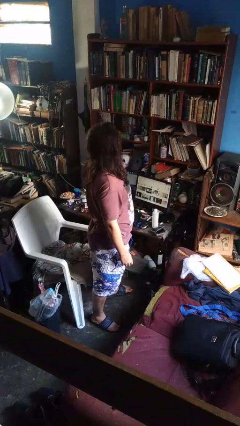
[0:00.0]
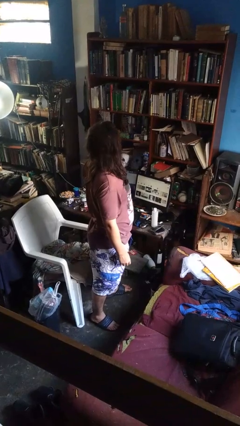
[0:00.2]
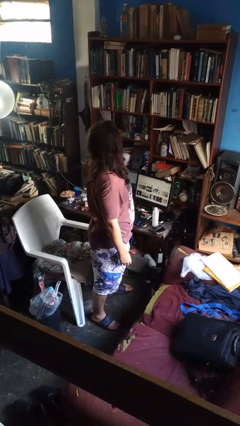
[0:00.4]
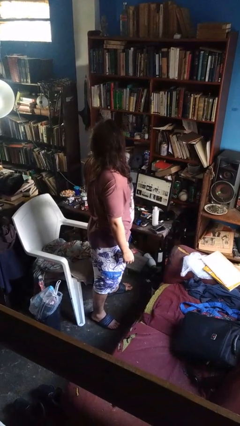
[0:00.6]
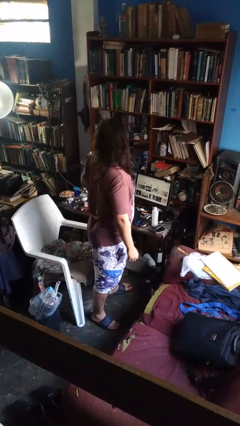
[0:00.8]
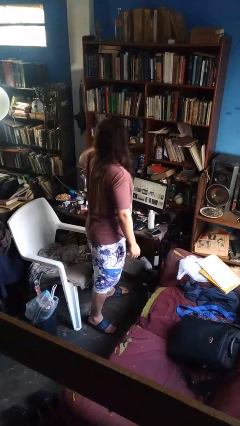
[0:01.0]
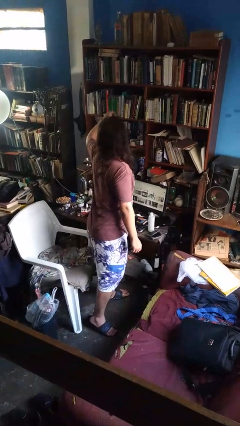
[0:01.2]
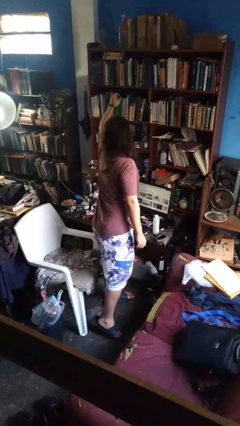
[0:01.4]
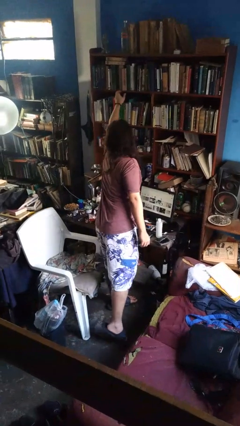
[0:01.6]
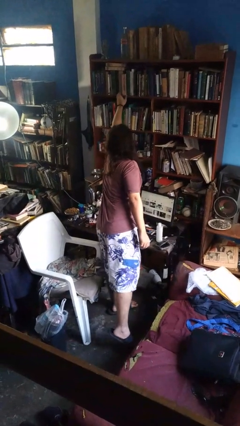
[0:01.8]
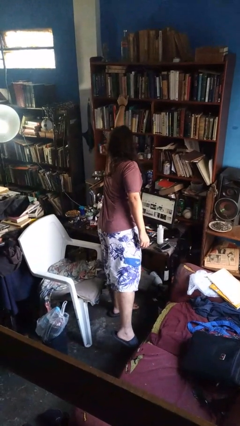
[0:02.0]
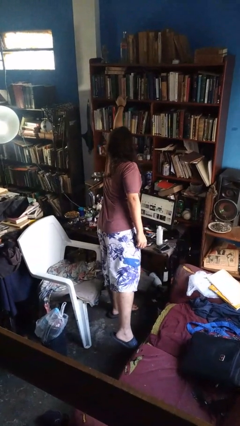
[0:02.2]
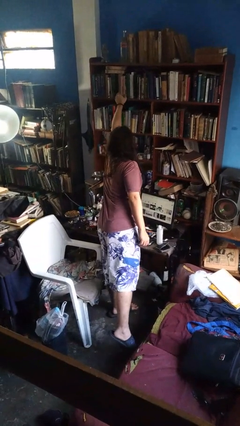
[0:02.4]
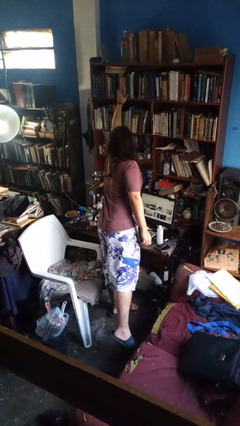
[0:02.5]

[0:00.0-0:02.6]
person picks up object from shelf

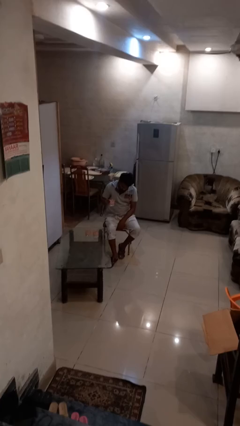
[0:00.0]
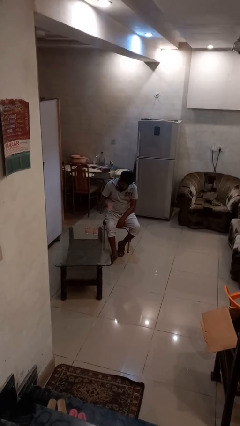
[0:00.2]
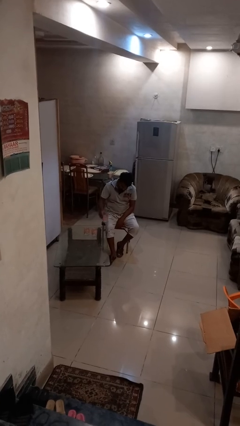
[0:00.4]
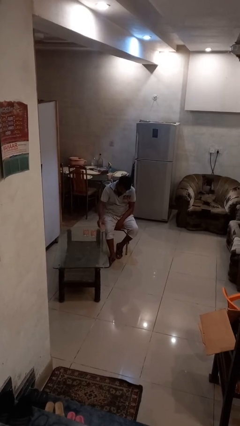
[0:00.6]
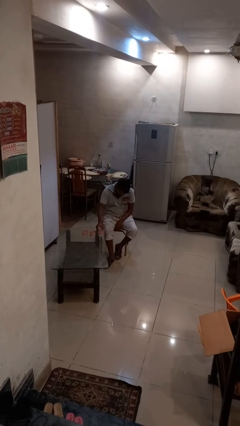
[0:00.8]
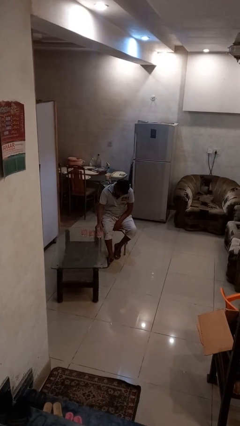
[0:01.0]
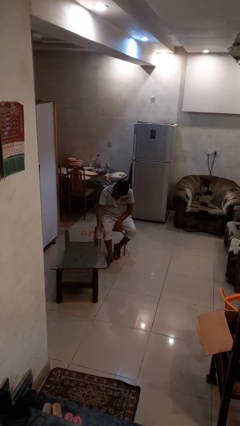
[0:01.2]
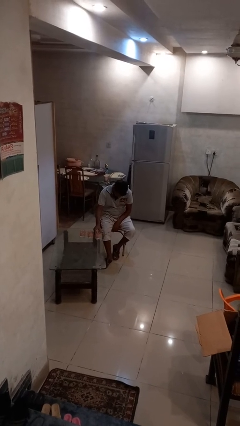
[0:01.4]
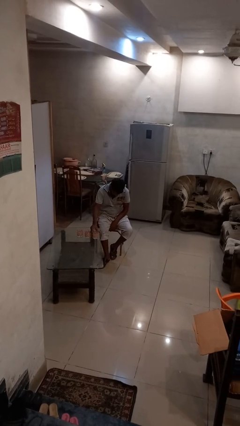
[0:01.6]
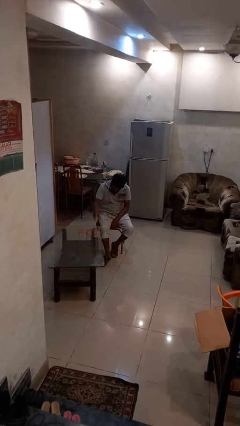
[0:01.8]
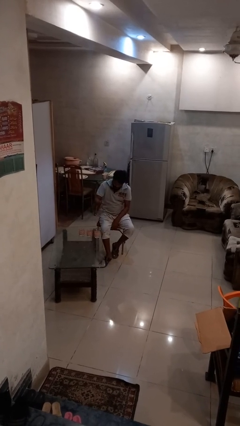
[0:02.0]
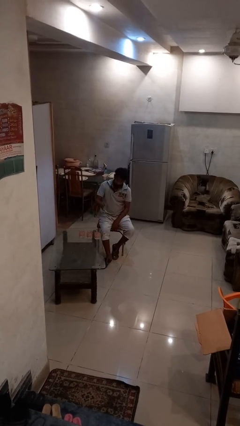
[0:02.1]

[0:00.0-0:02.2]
person puts down object on table

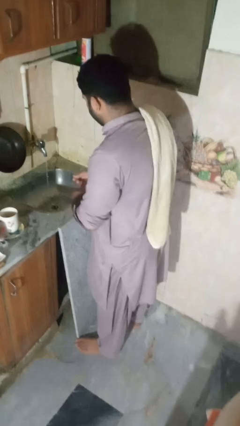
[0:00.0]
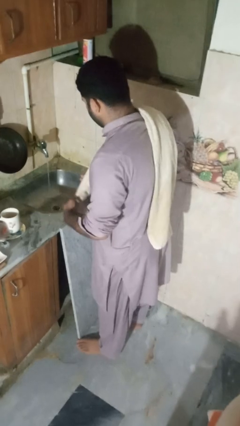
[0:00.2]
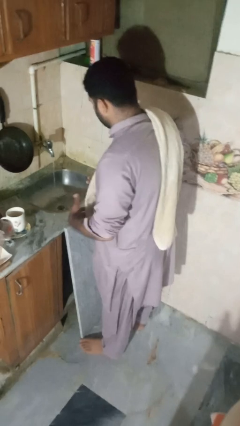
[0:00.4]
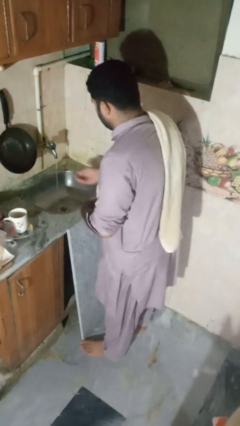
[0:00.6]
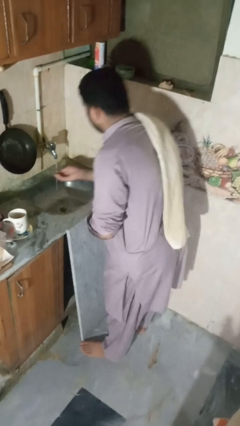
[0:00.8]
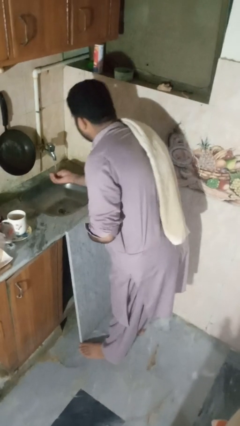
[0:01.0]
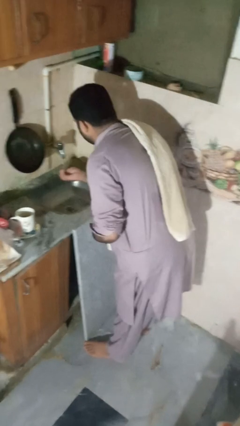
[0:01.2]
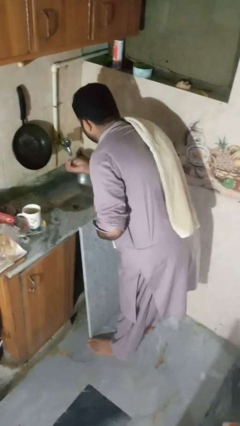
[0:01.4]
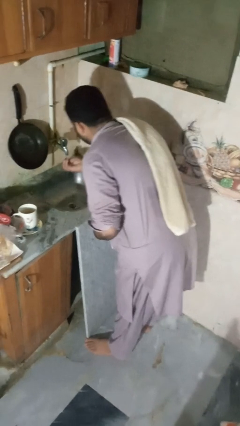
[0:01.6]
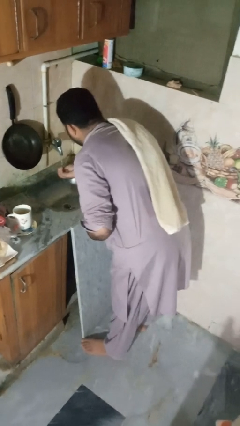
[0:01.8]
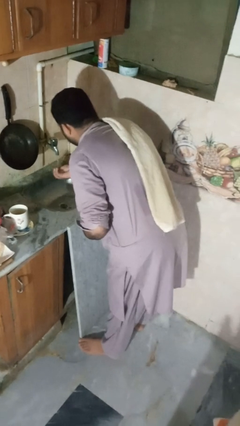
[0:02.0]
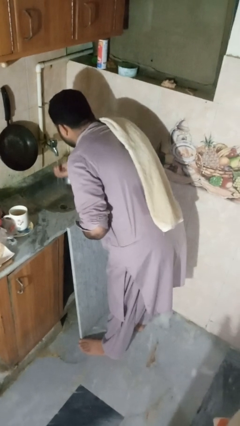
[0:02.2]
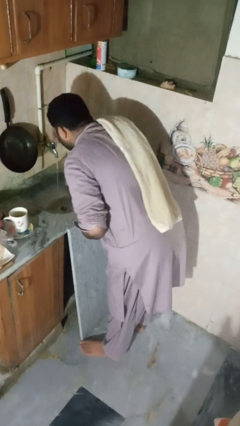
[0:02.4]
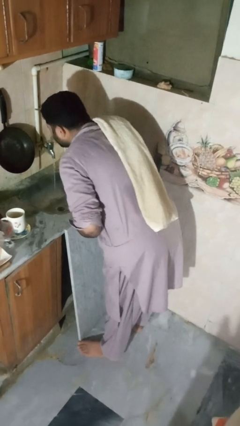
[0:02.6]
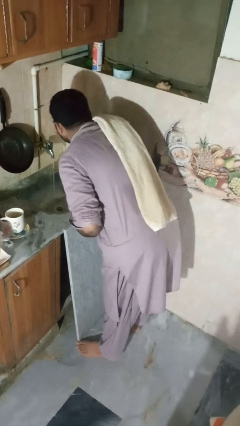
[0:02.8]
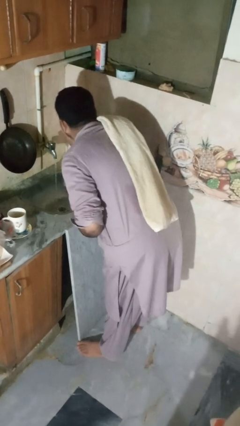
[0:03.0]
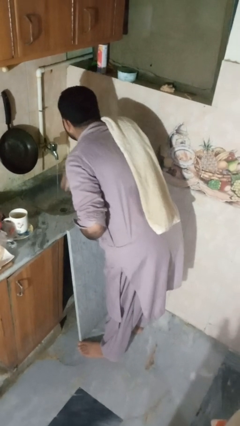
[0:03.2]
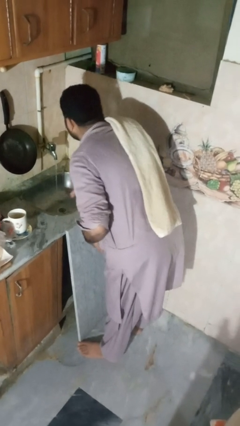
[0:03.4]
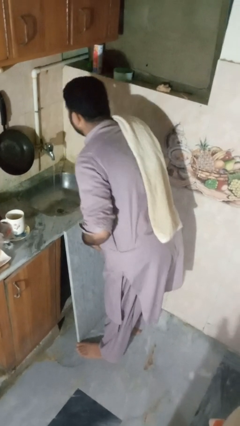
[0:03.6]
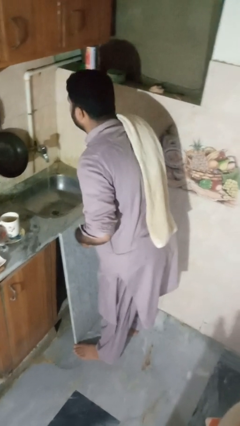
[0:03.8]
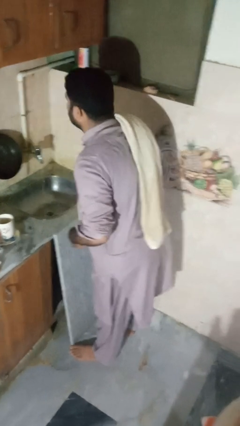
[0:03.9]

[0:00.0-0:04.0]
person washes face

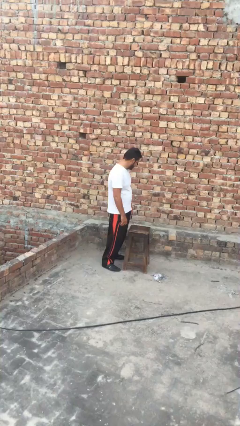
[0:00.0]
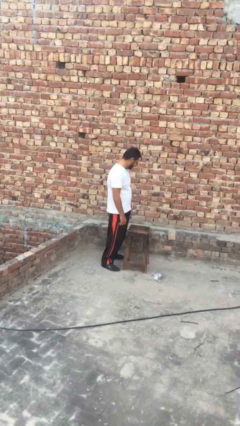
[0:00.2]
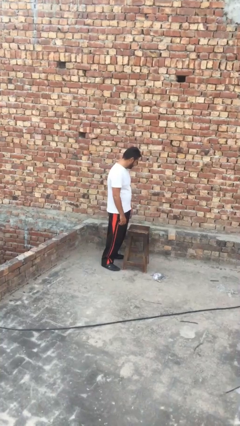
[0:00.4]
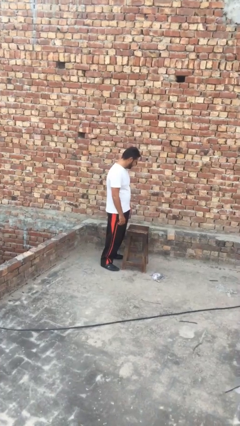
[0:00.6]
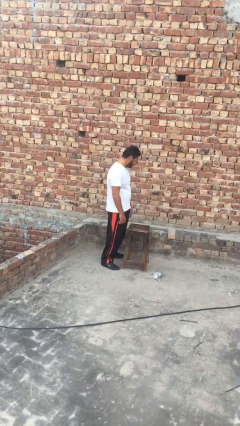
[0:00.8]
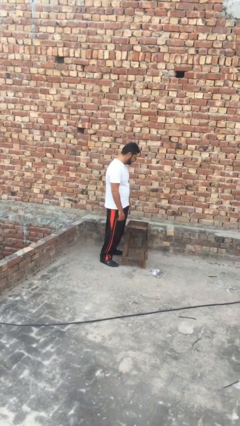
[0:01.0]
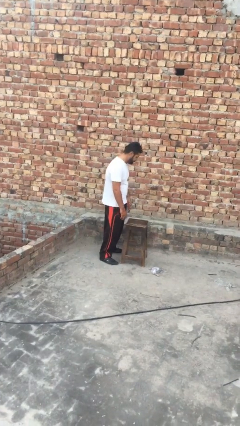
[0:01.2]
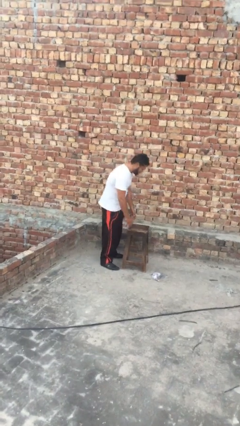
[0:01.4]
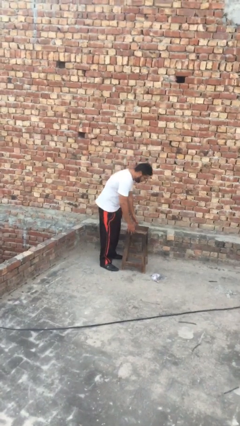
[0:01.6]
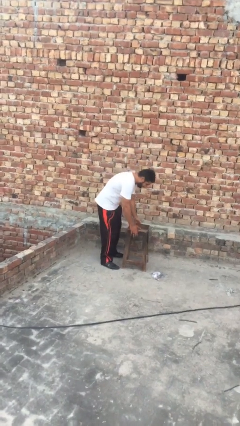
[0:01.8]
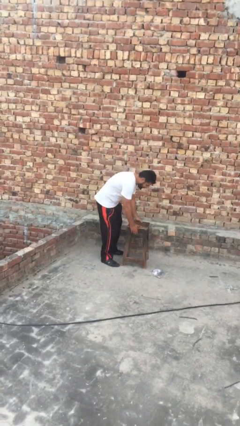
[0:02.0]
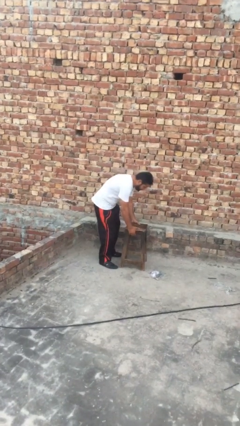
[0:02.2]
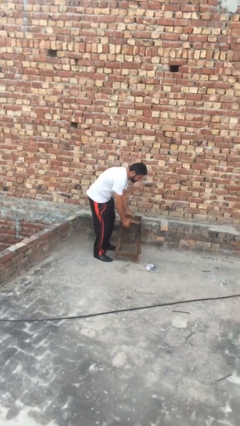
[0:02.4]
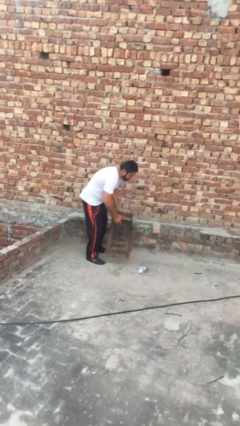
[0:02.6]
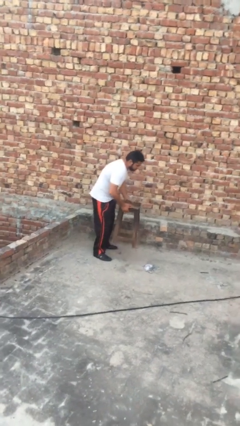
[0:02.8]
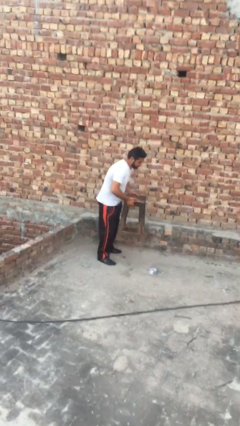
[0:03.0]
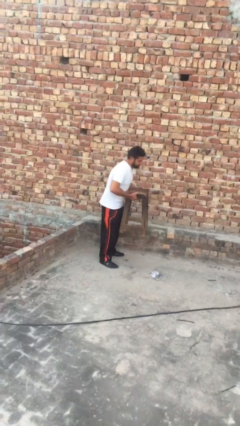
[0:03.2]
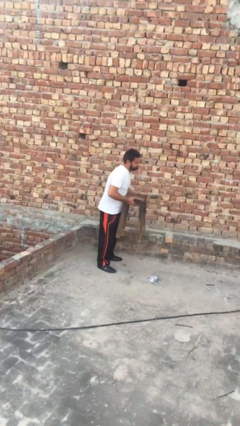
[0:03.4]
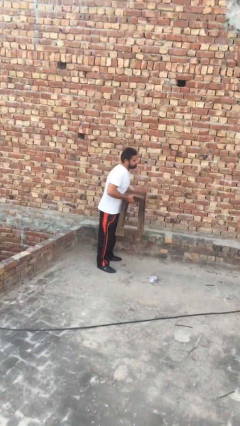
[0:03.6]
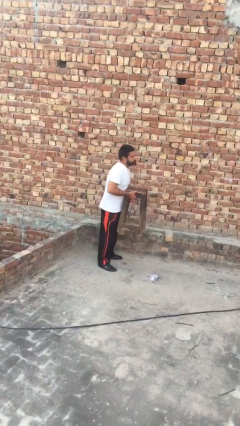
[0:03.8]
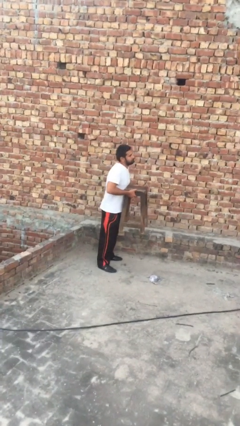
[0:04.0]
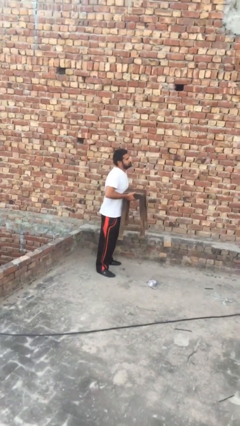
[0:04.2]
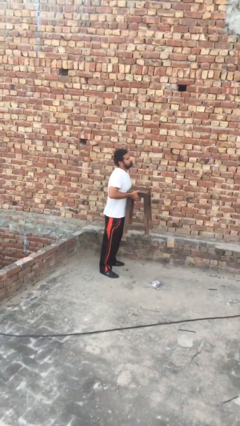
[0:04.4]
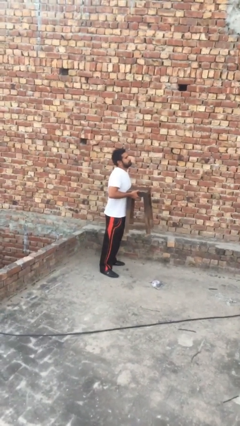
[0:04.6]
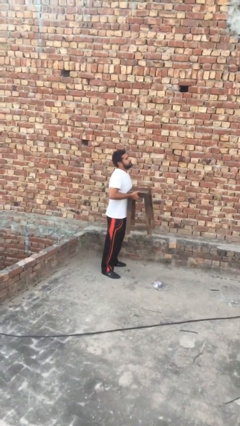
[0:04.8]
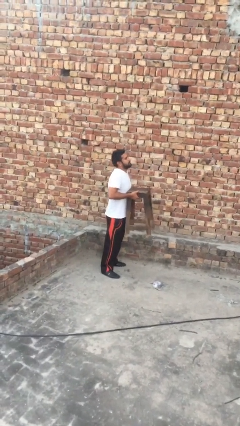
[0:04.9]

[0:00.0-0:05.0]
person picks up object from floor

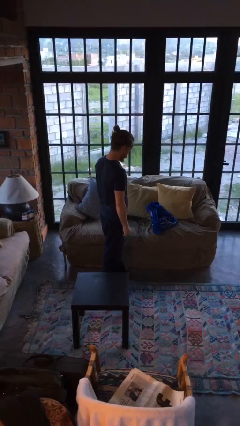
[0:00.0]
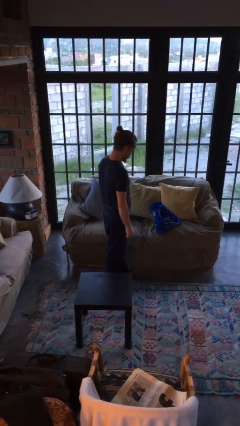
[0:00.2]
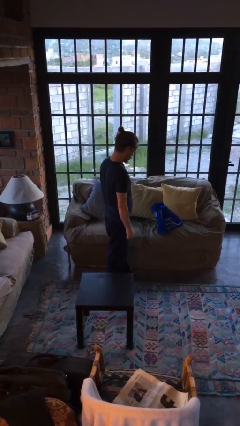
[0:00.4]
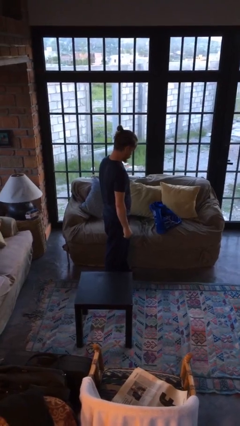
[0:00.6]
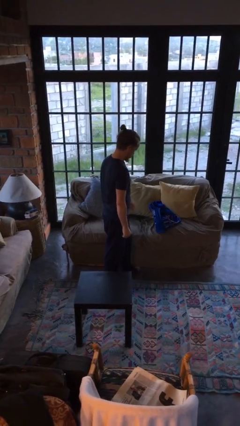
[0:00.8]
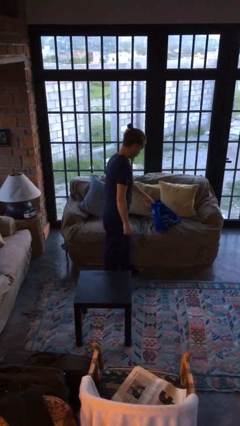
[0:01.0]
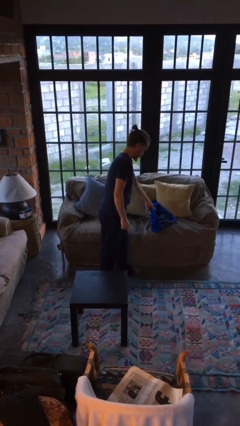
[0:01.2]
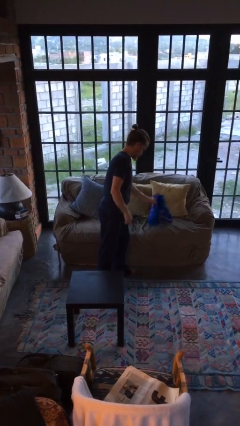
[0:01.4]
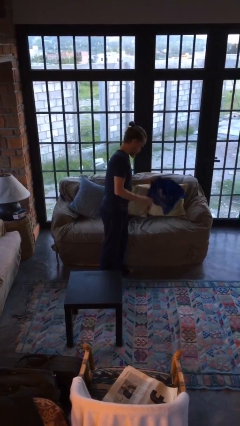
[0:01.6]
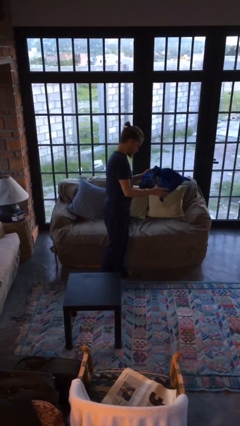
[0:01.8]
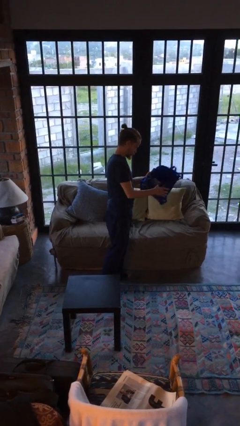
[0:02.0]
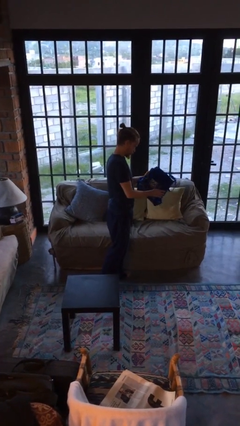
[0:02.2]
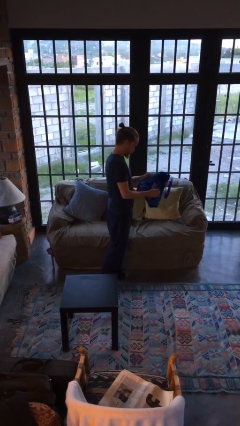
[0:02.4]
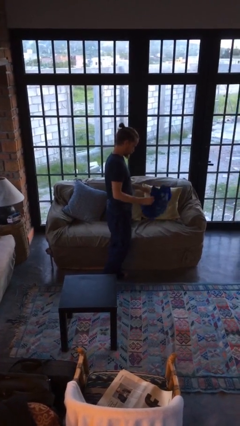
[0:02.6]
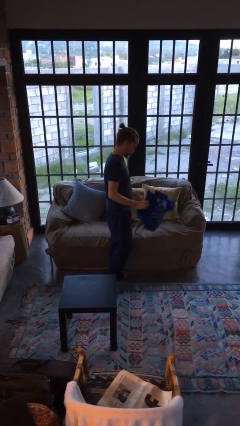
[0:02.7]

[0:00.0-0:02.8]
person picks up object from couch

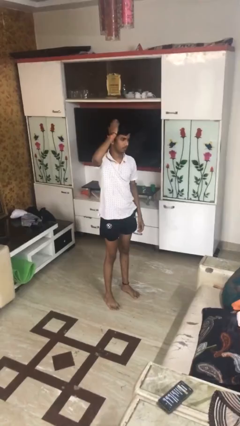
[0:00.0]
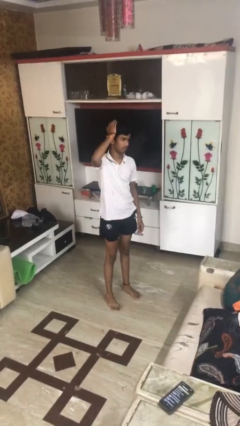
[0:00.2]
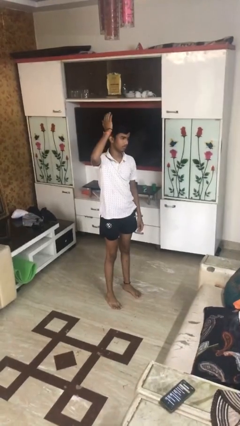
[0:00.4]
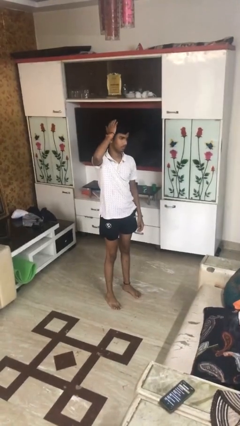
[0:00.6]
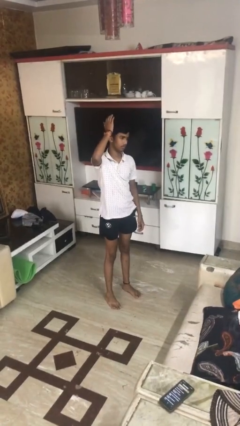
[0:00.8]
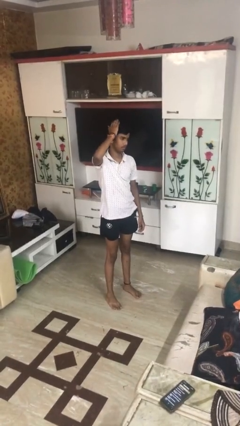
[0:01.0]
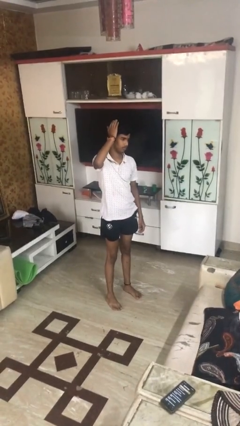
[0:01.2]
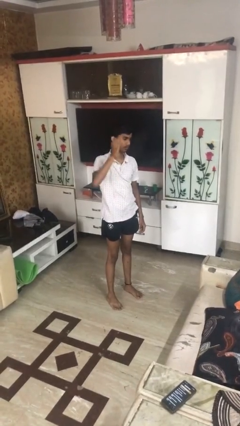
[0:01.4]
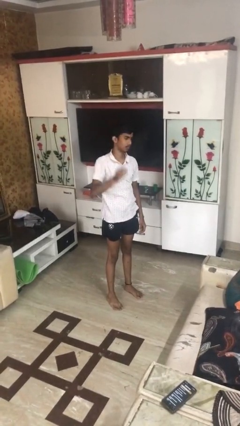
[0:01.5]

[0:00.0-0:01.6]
person pats head
